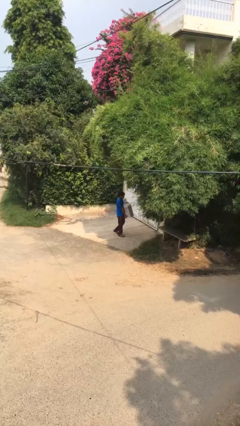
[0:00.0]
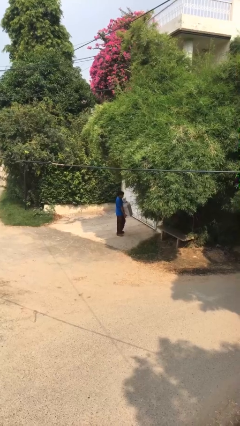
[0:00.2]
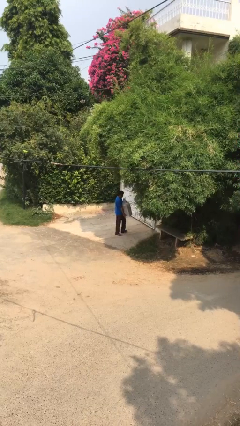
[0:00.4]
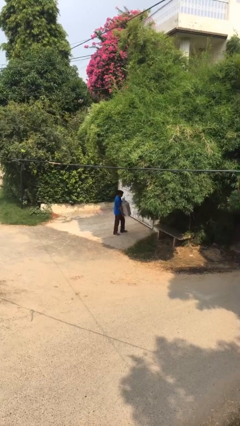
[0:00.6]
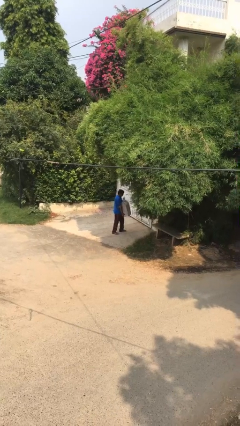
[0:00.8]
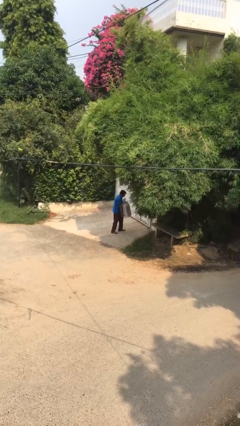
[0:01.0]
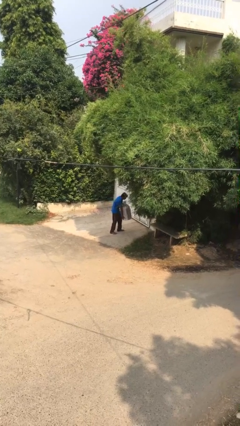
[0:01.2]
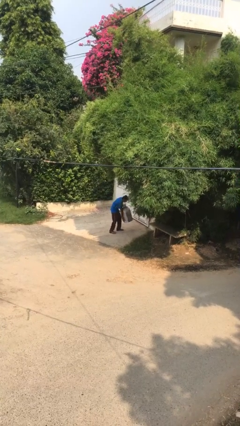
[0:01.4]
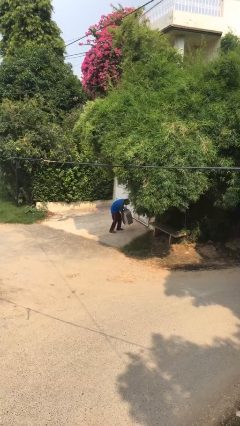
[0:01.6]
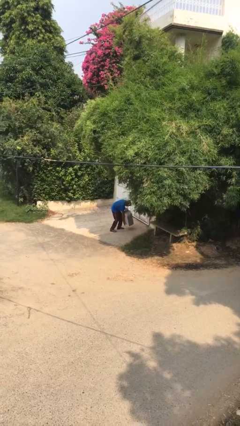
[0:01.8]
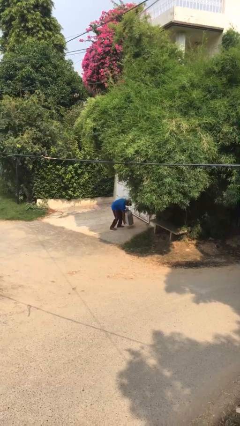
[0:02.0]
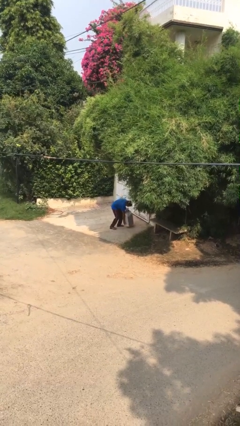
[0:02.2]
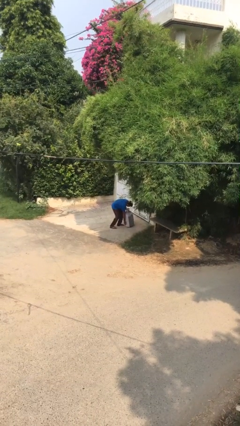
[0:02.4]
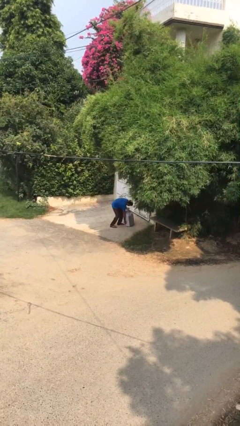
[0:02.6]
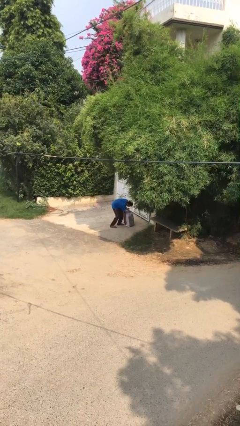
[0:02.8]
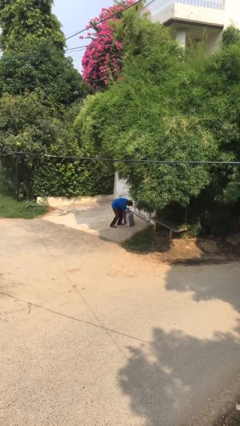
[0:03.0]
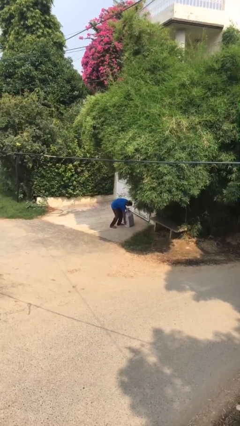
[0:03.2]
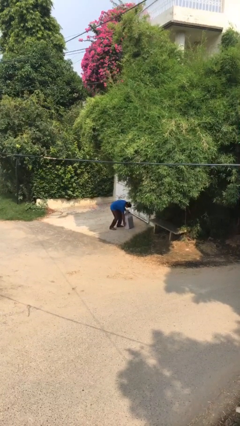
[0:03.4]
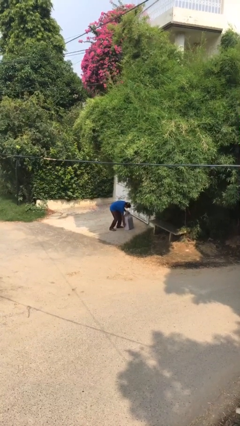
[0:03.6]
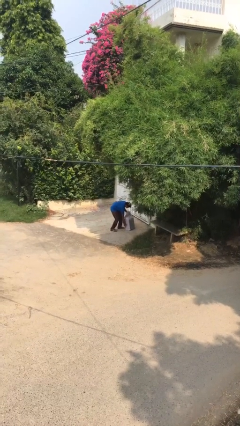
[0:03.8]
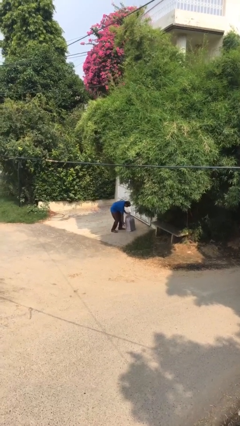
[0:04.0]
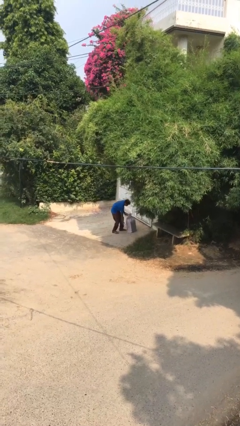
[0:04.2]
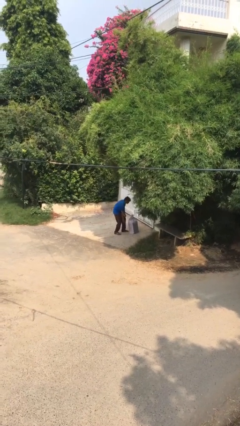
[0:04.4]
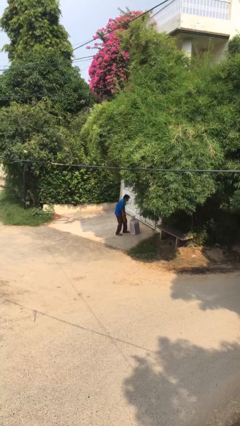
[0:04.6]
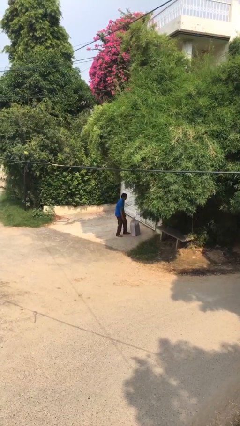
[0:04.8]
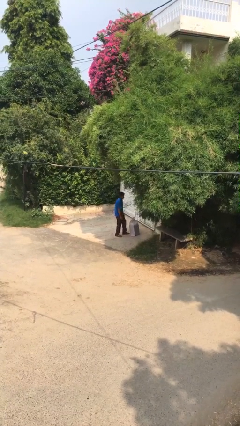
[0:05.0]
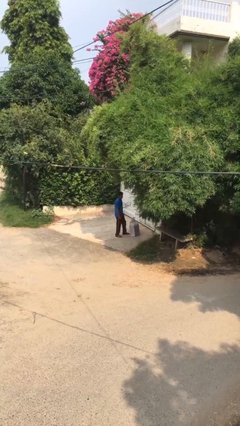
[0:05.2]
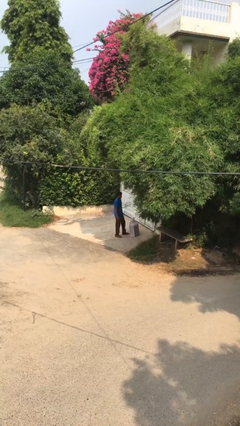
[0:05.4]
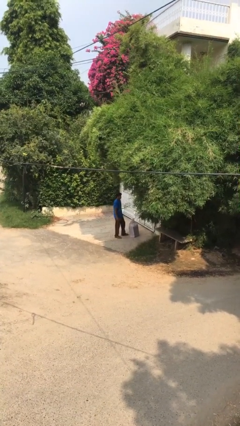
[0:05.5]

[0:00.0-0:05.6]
person puts down object on floor

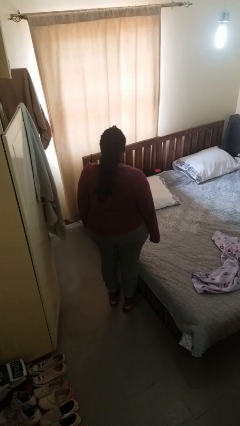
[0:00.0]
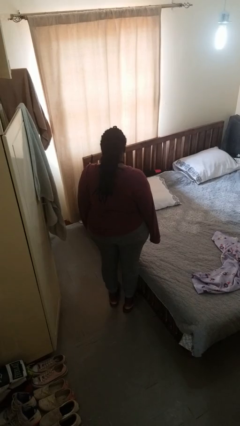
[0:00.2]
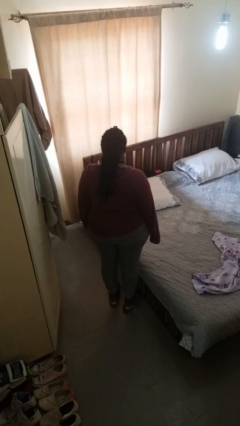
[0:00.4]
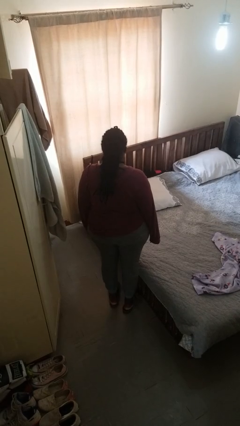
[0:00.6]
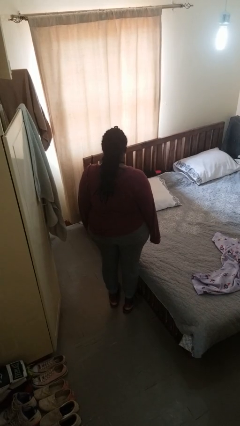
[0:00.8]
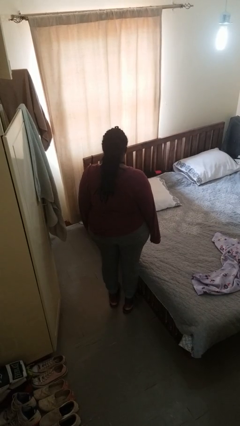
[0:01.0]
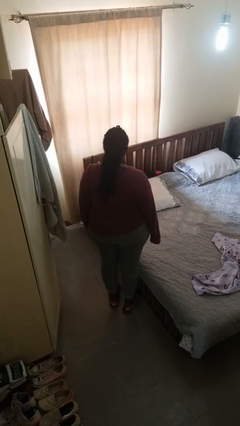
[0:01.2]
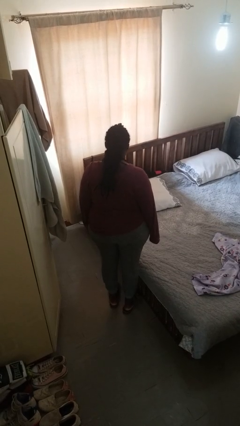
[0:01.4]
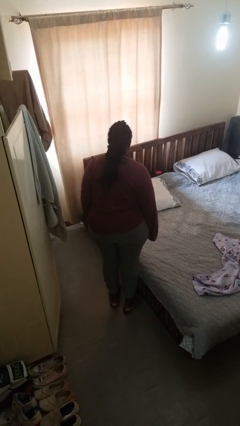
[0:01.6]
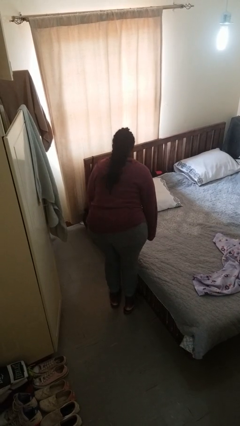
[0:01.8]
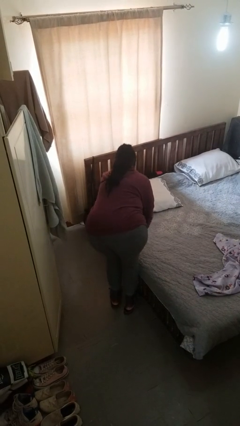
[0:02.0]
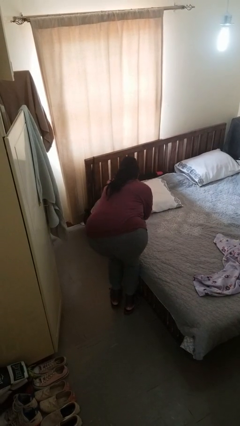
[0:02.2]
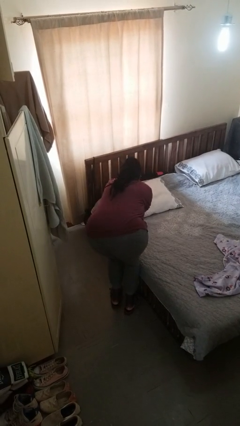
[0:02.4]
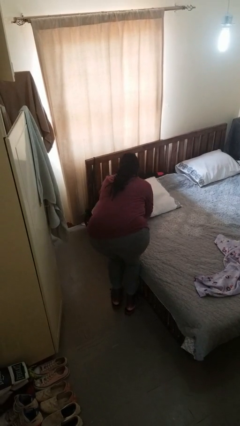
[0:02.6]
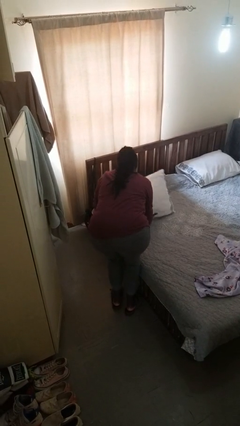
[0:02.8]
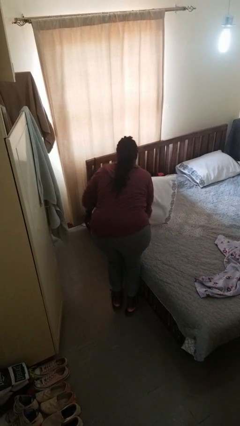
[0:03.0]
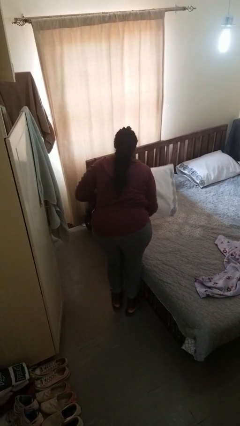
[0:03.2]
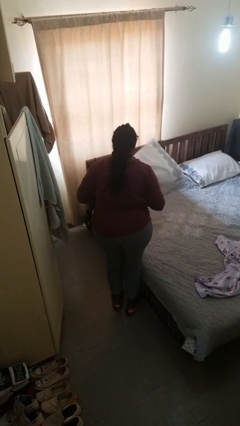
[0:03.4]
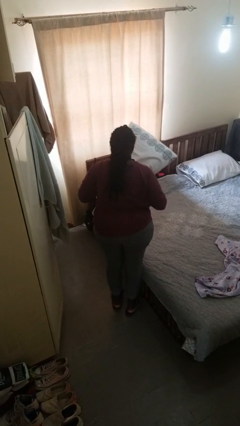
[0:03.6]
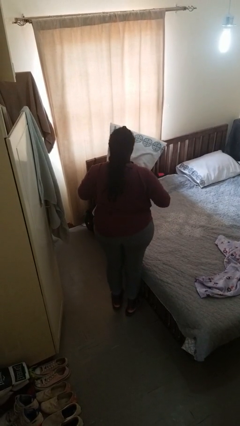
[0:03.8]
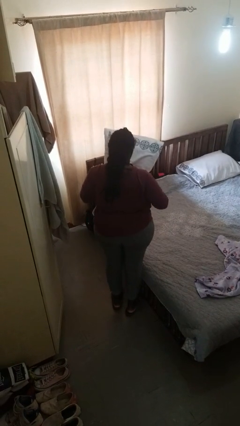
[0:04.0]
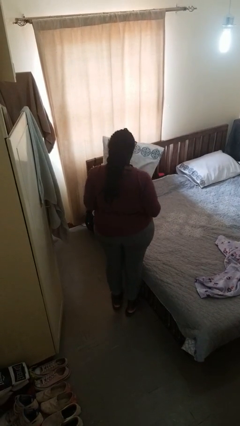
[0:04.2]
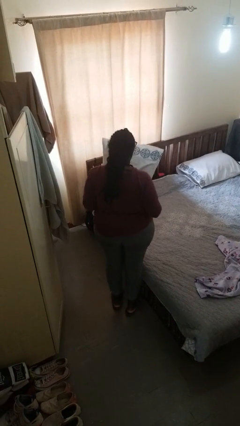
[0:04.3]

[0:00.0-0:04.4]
person picks up object from bed

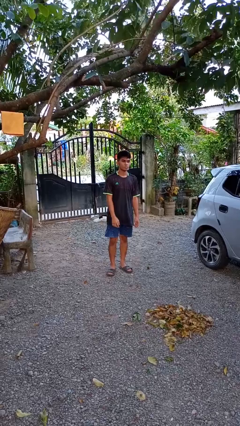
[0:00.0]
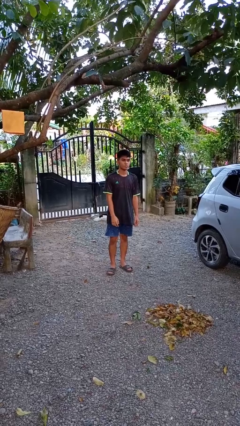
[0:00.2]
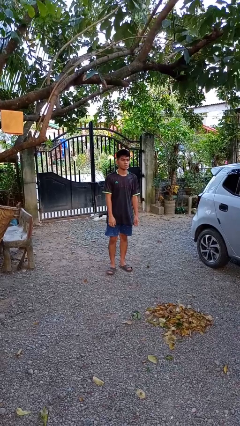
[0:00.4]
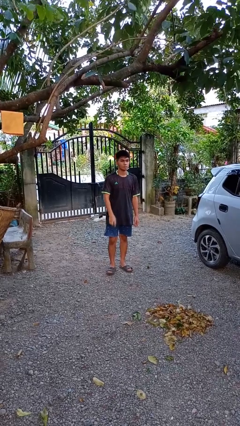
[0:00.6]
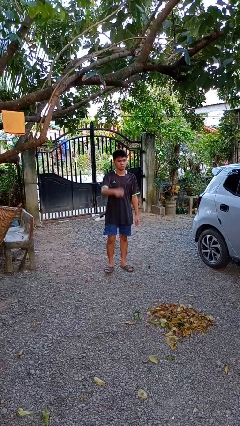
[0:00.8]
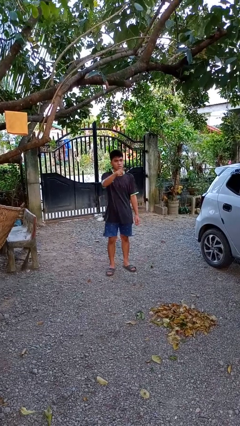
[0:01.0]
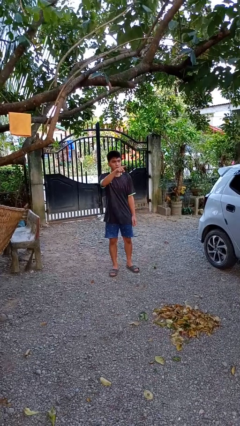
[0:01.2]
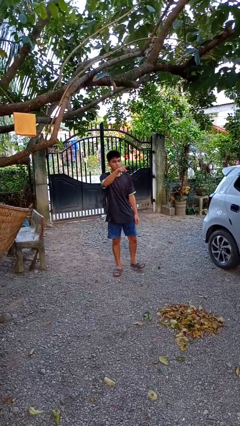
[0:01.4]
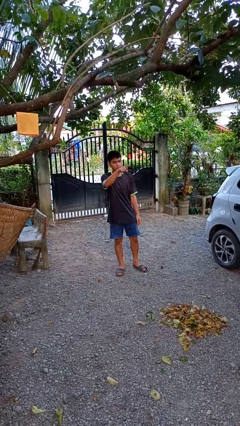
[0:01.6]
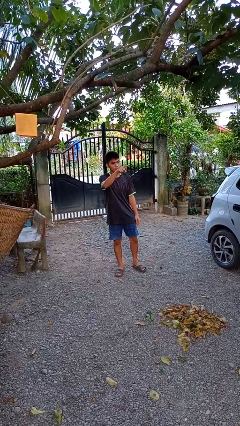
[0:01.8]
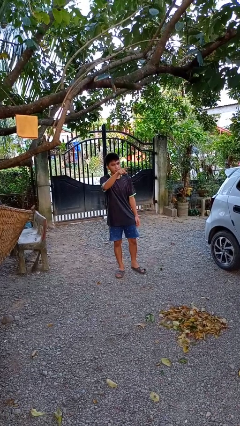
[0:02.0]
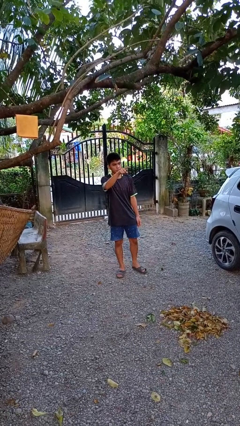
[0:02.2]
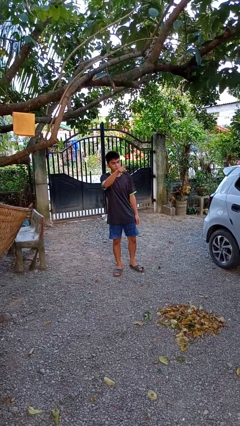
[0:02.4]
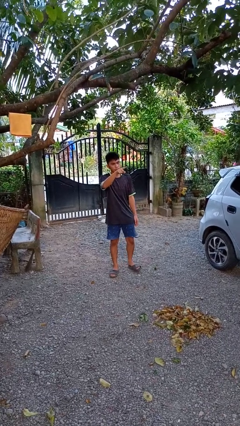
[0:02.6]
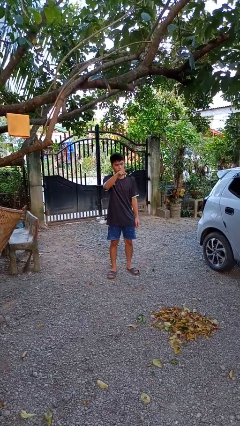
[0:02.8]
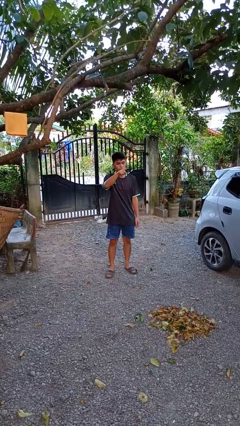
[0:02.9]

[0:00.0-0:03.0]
person points at person

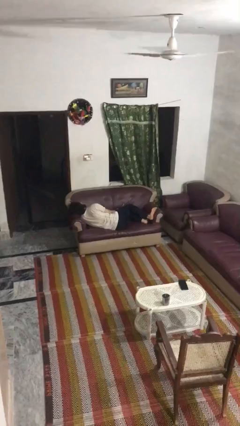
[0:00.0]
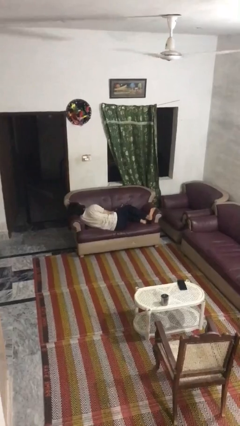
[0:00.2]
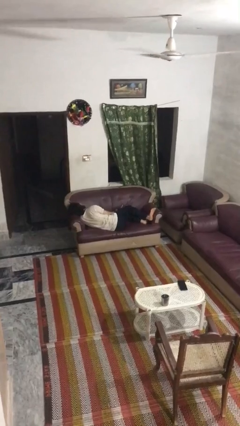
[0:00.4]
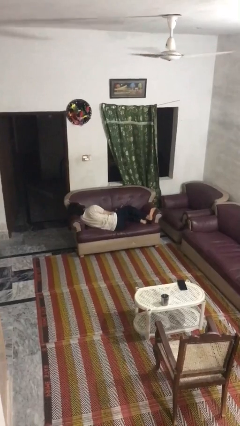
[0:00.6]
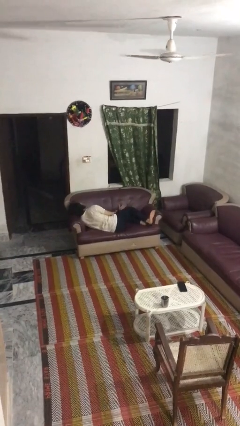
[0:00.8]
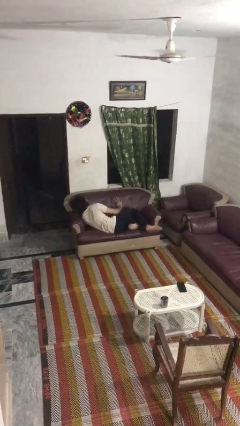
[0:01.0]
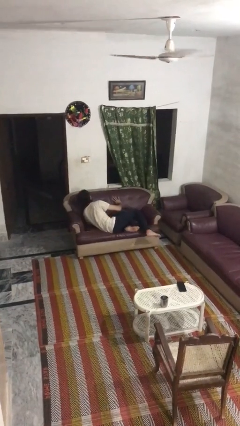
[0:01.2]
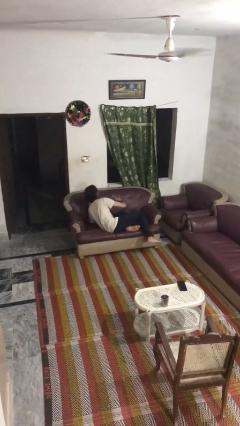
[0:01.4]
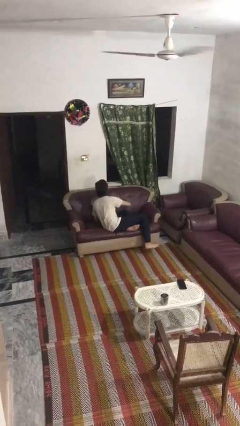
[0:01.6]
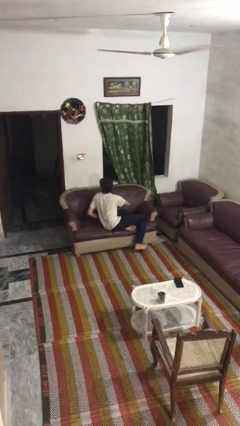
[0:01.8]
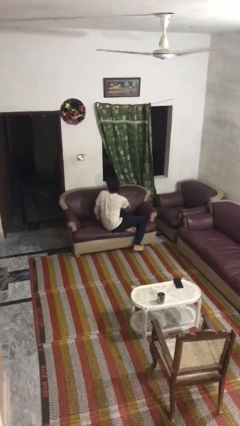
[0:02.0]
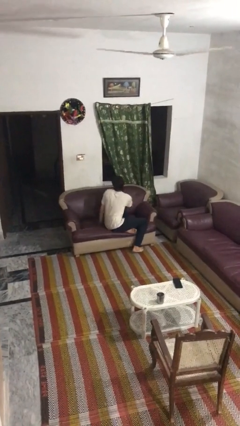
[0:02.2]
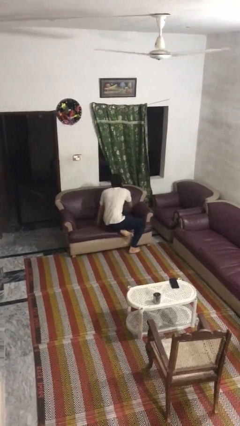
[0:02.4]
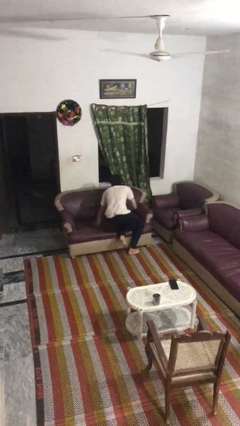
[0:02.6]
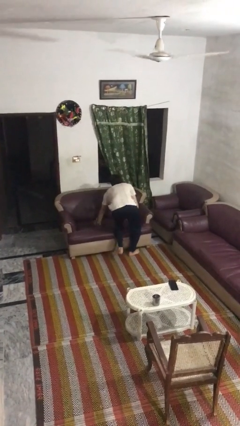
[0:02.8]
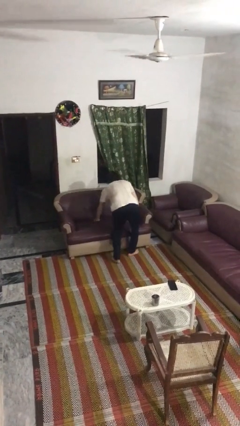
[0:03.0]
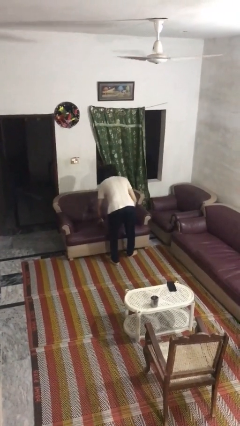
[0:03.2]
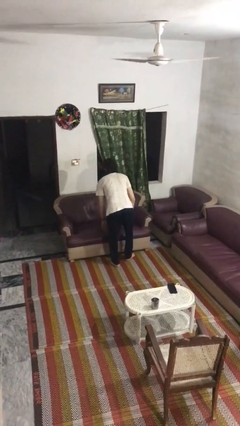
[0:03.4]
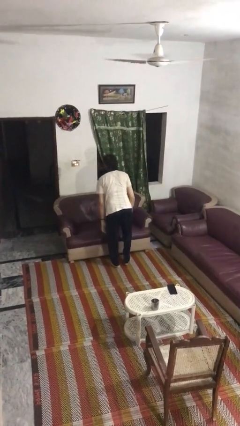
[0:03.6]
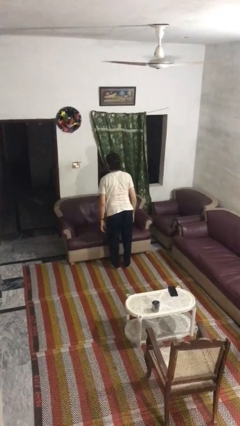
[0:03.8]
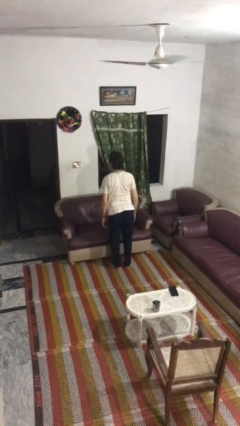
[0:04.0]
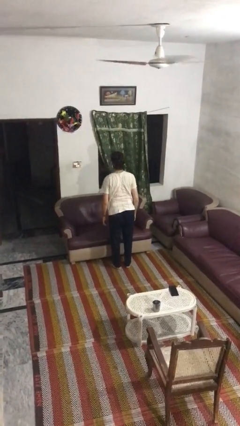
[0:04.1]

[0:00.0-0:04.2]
person stands up

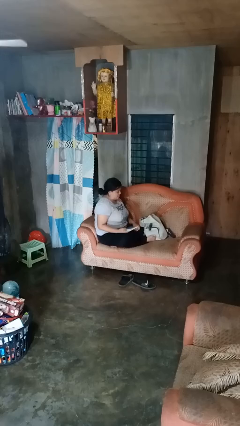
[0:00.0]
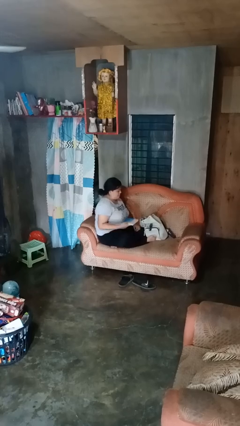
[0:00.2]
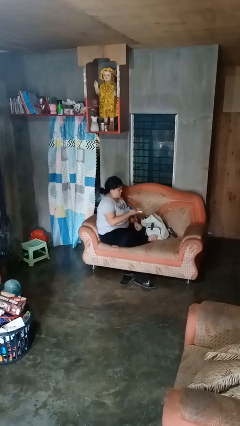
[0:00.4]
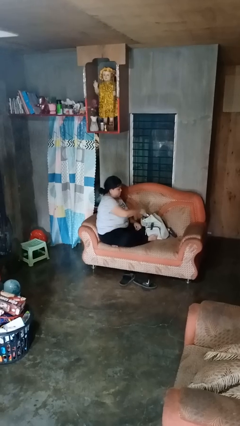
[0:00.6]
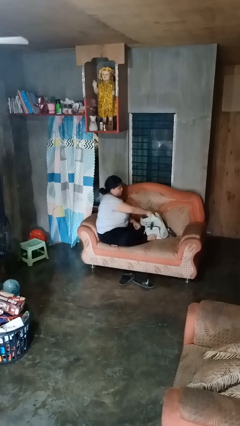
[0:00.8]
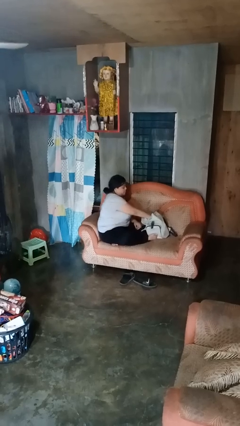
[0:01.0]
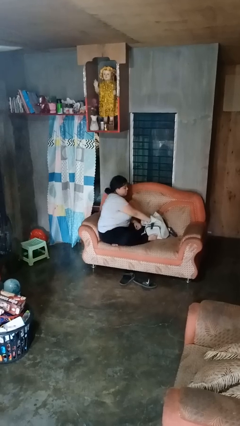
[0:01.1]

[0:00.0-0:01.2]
person puts object into backpack
